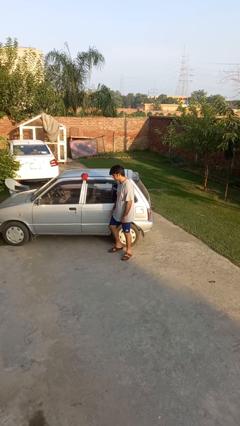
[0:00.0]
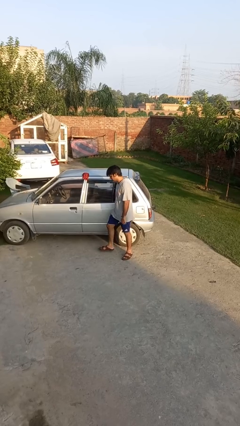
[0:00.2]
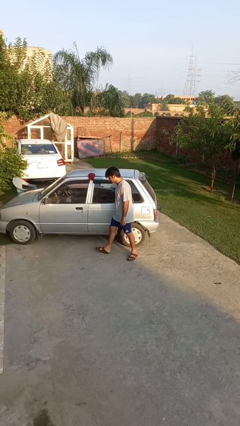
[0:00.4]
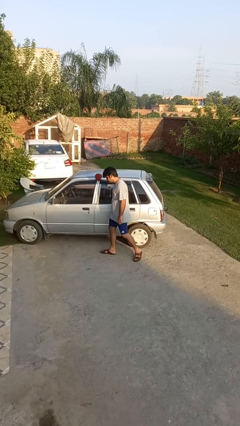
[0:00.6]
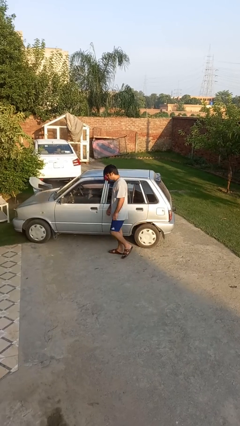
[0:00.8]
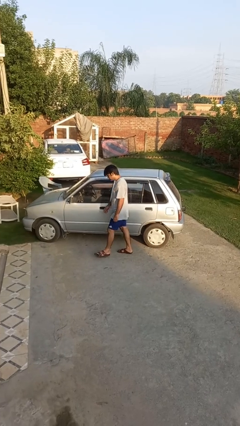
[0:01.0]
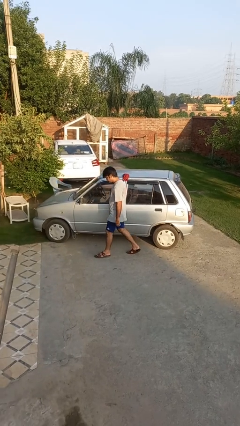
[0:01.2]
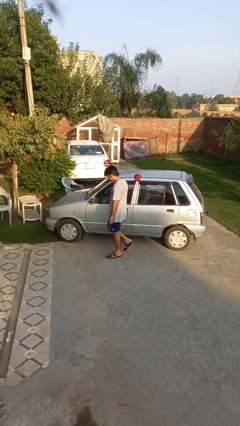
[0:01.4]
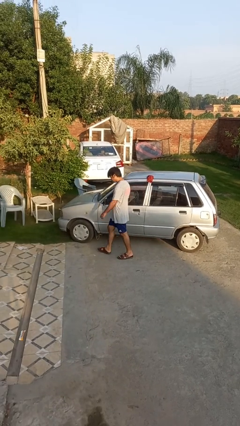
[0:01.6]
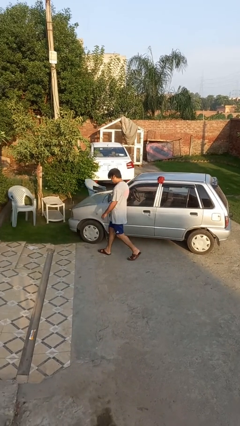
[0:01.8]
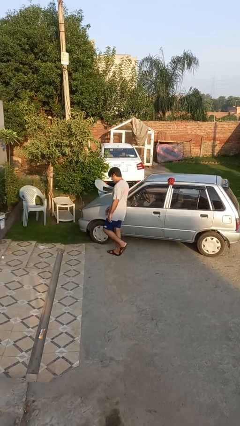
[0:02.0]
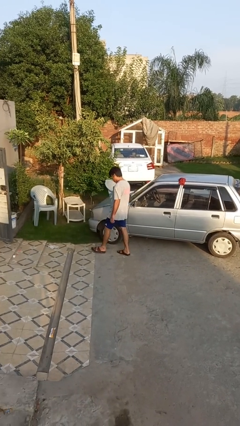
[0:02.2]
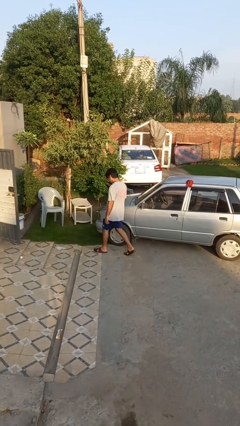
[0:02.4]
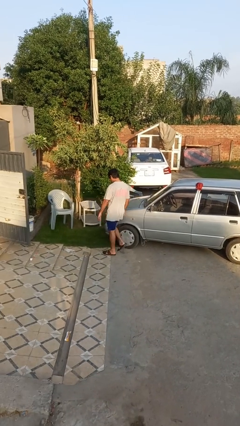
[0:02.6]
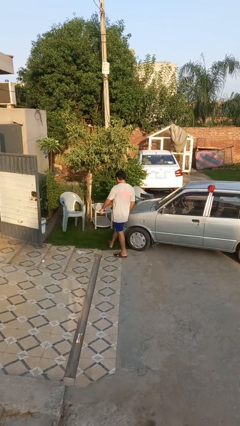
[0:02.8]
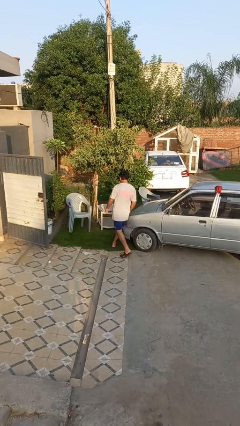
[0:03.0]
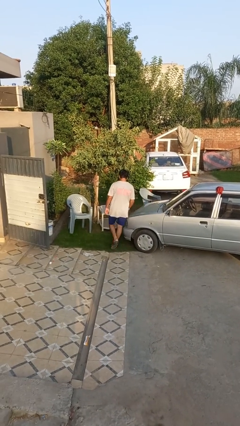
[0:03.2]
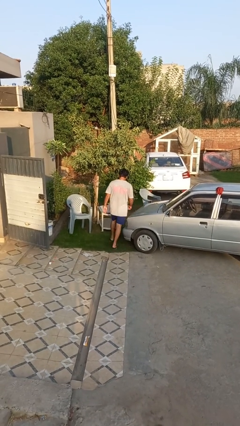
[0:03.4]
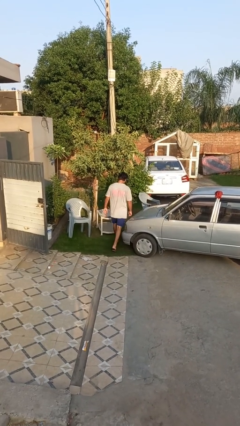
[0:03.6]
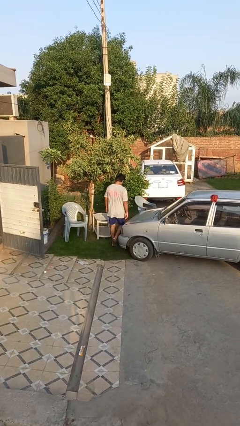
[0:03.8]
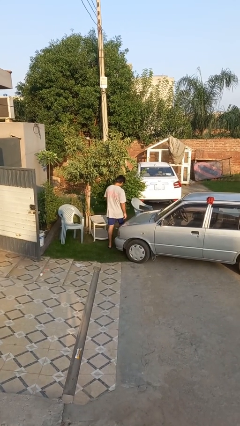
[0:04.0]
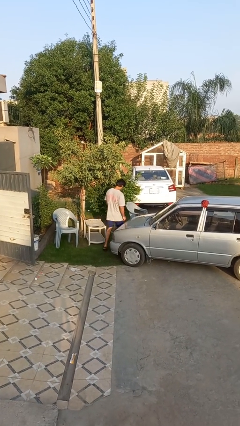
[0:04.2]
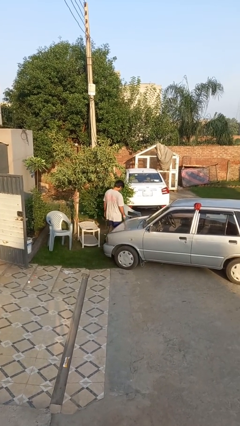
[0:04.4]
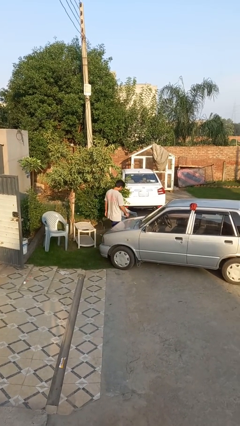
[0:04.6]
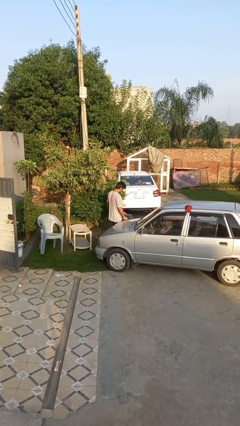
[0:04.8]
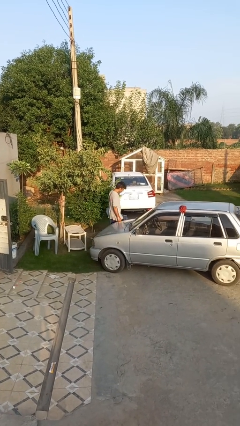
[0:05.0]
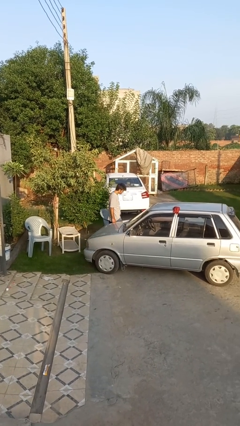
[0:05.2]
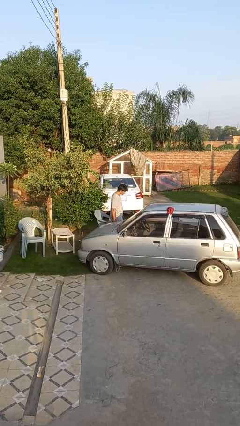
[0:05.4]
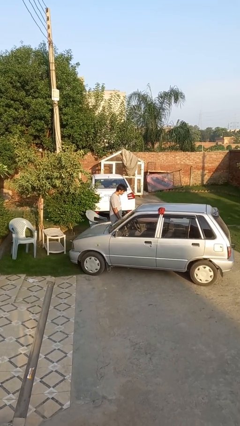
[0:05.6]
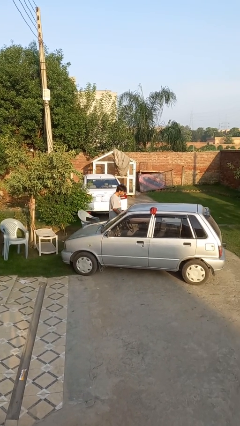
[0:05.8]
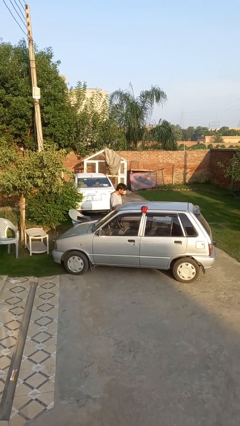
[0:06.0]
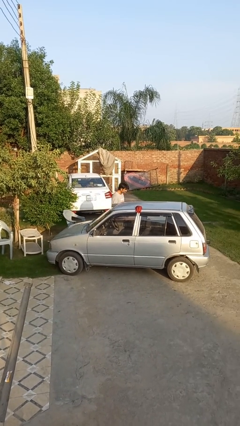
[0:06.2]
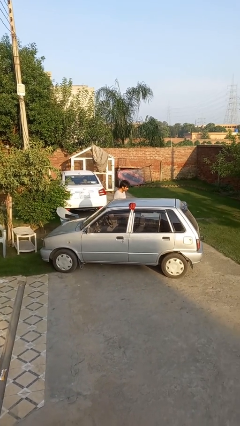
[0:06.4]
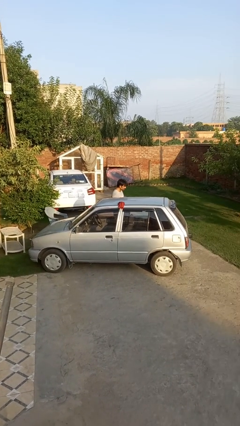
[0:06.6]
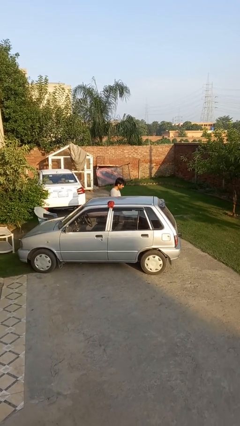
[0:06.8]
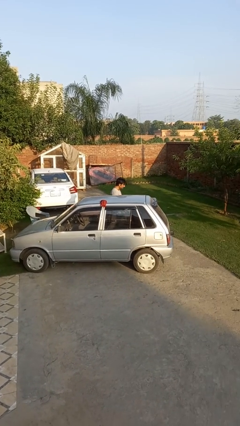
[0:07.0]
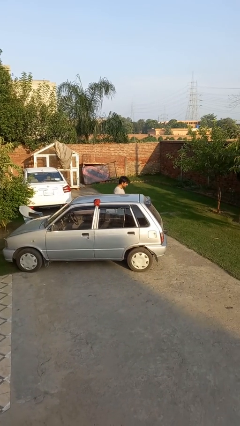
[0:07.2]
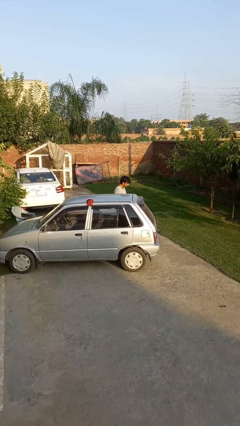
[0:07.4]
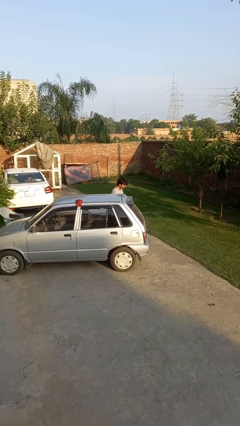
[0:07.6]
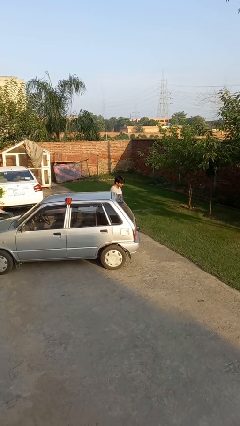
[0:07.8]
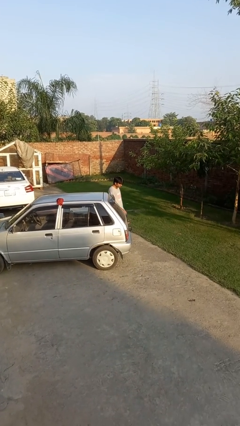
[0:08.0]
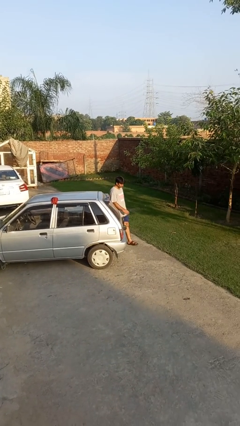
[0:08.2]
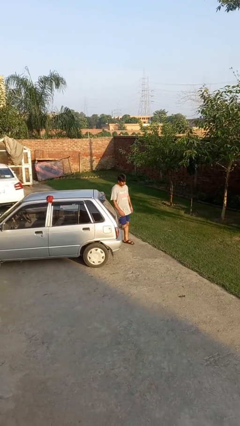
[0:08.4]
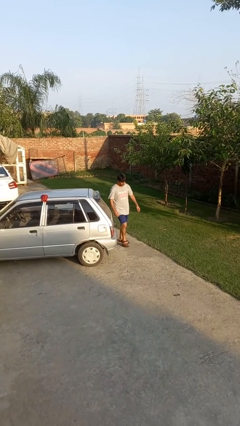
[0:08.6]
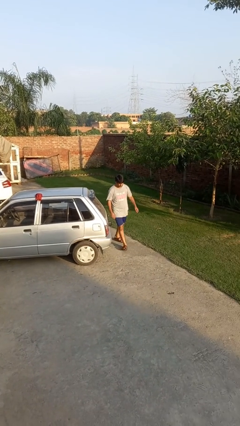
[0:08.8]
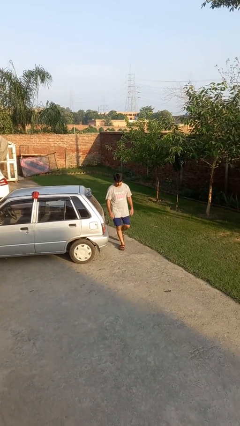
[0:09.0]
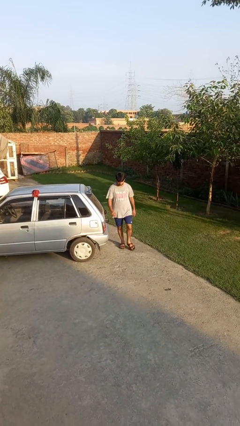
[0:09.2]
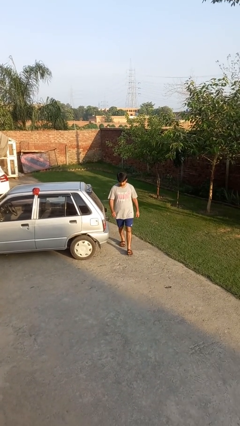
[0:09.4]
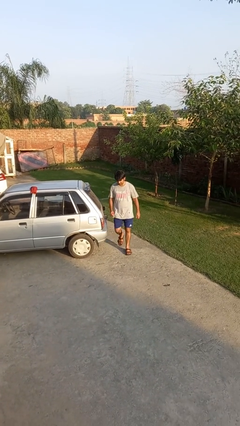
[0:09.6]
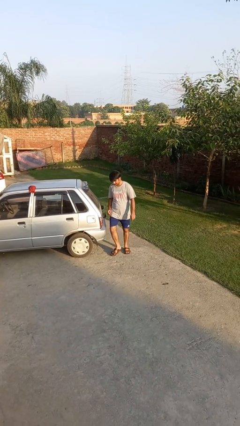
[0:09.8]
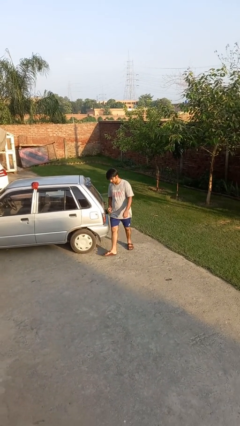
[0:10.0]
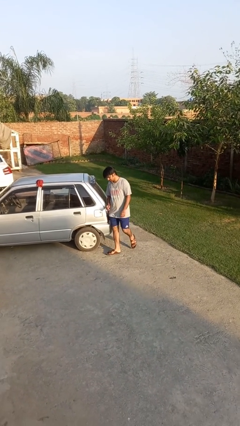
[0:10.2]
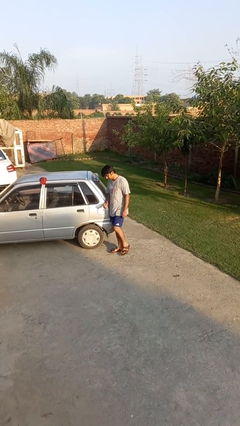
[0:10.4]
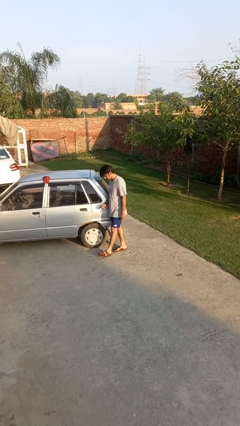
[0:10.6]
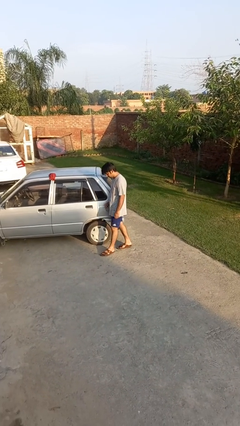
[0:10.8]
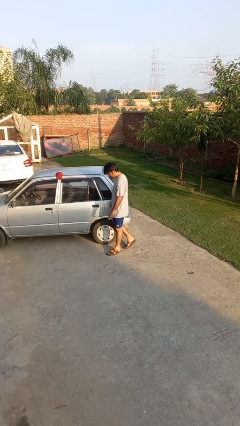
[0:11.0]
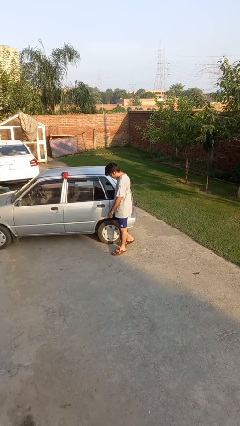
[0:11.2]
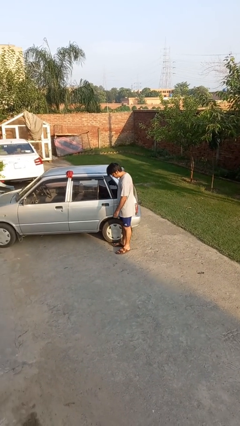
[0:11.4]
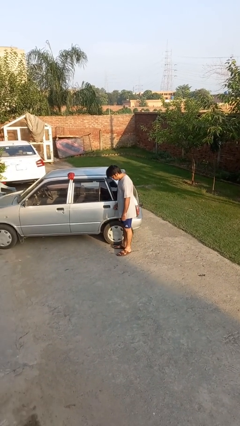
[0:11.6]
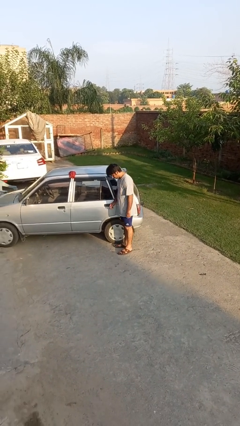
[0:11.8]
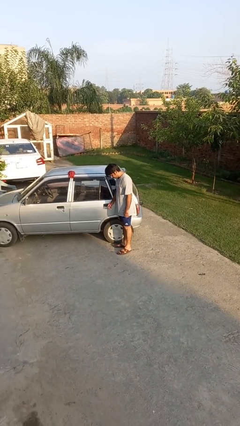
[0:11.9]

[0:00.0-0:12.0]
person walks around car

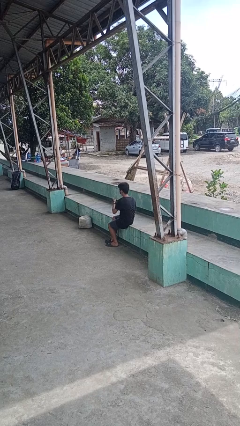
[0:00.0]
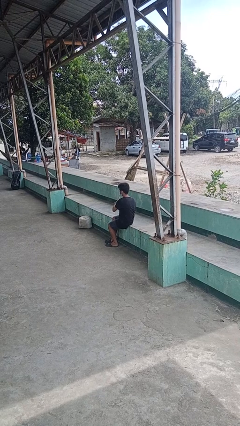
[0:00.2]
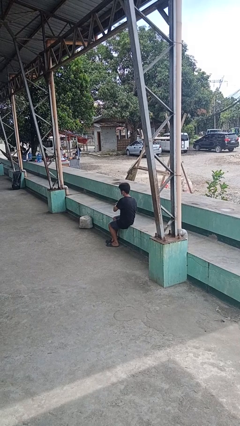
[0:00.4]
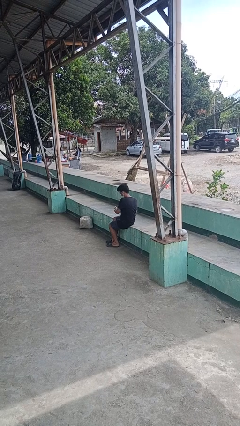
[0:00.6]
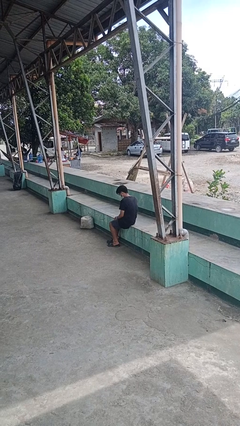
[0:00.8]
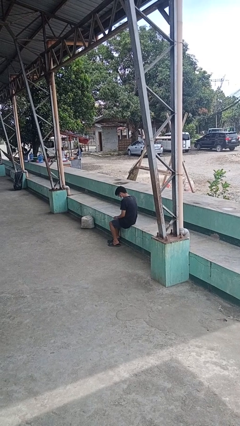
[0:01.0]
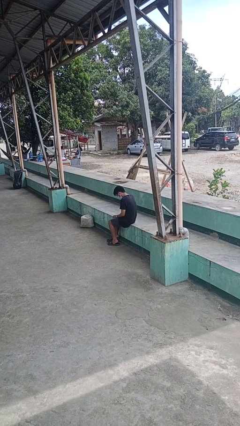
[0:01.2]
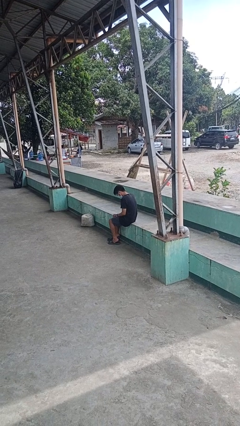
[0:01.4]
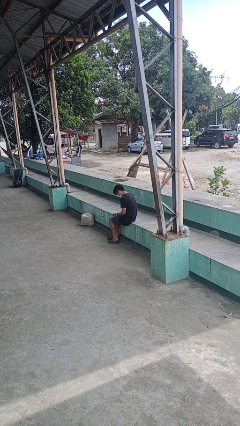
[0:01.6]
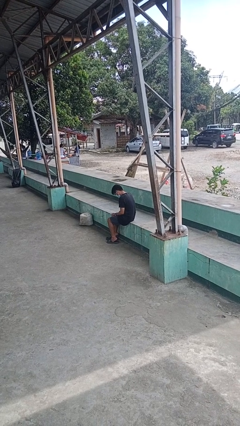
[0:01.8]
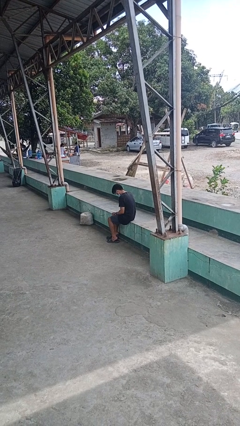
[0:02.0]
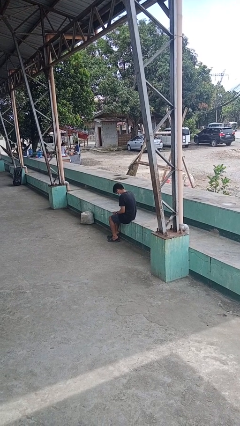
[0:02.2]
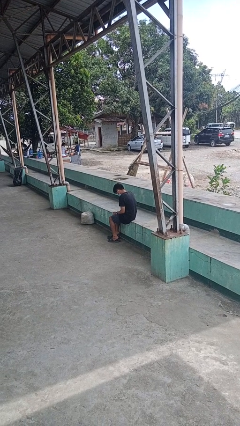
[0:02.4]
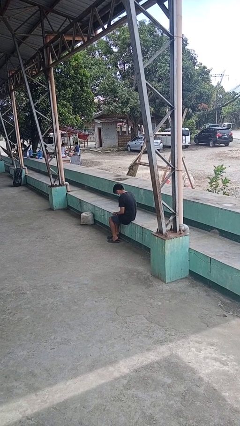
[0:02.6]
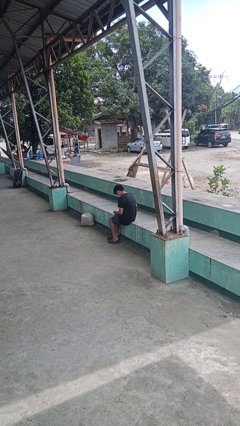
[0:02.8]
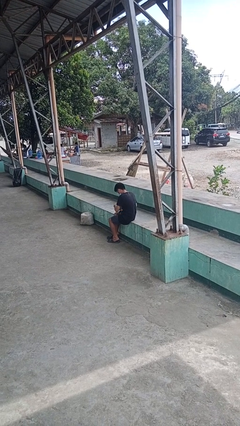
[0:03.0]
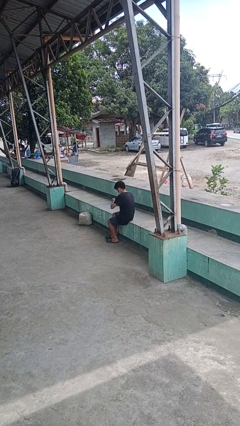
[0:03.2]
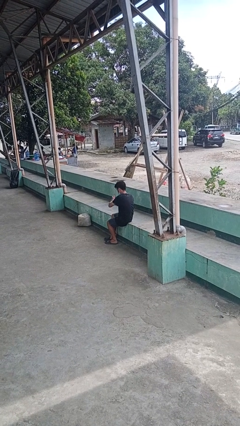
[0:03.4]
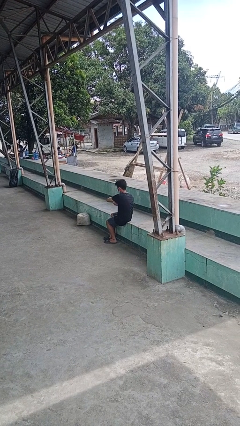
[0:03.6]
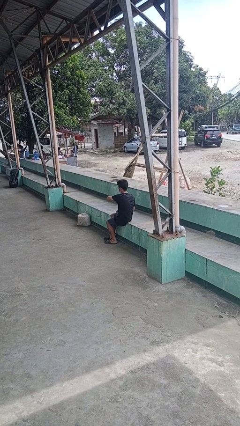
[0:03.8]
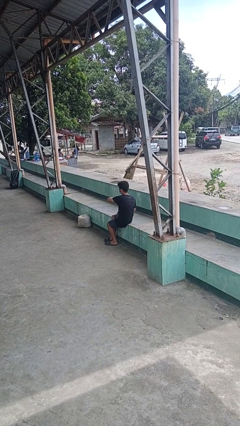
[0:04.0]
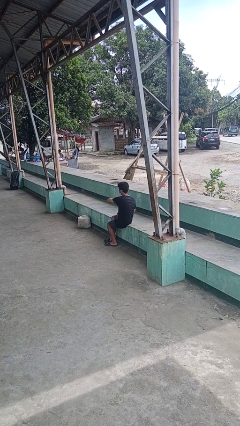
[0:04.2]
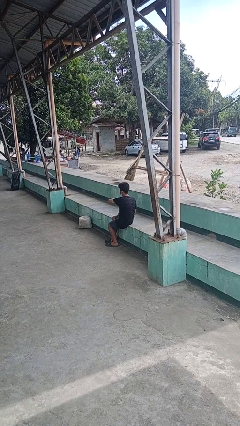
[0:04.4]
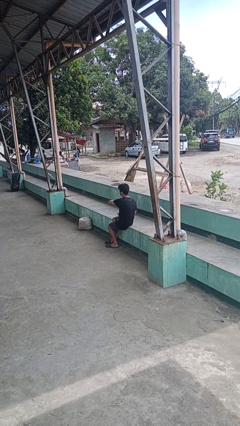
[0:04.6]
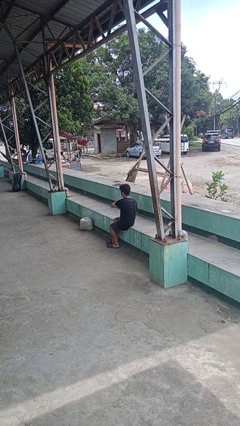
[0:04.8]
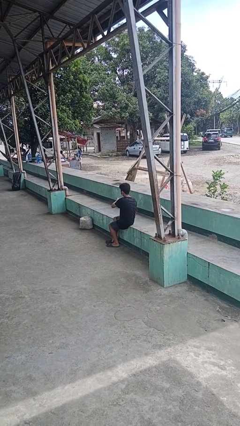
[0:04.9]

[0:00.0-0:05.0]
person puts on wristwatch

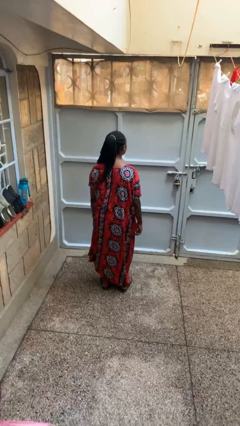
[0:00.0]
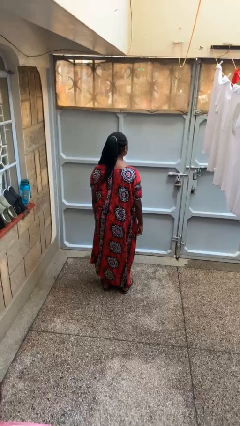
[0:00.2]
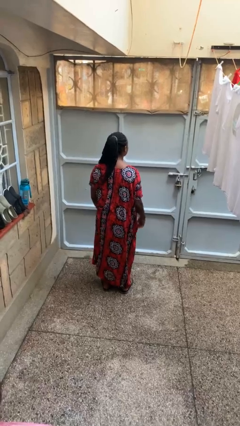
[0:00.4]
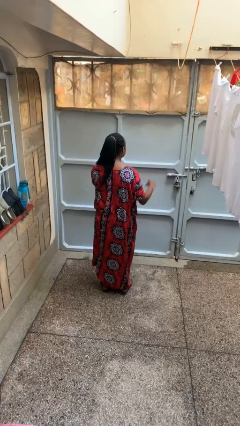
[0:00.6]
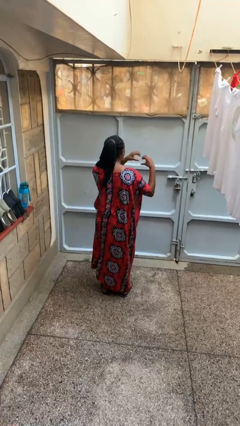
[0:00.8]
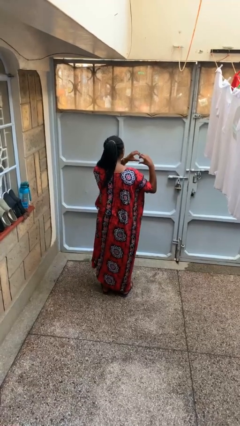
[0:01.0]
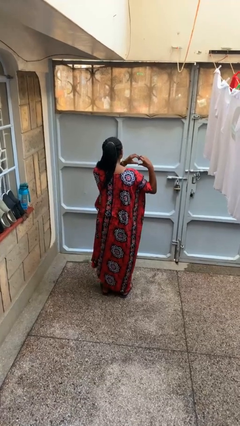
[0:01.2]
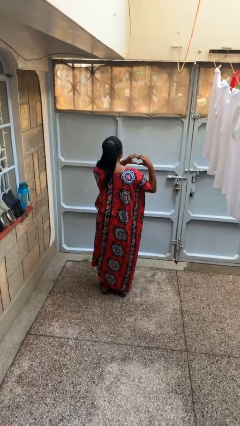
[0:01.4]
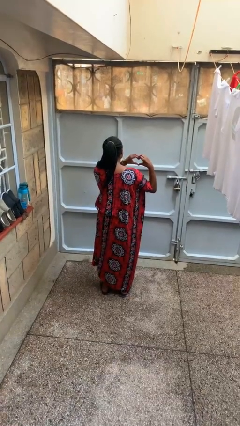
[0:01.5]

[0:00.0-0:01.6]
person gestures heart
